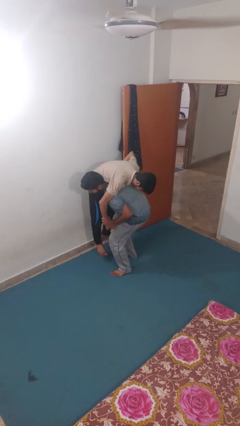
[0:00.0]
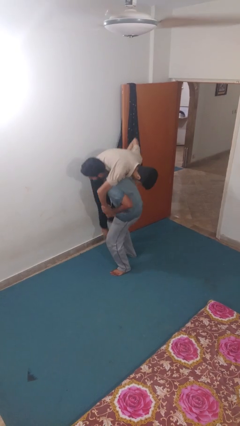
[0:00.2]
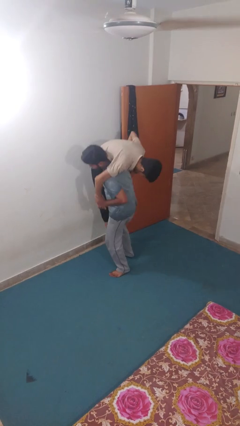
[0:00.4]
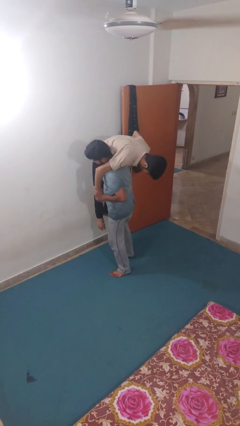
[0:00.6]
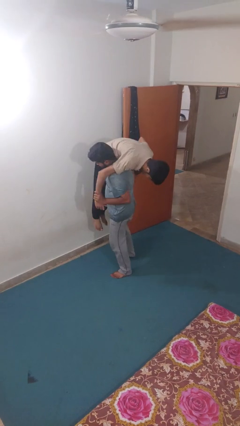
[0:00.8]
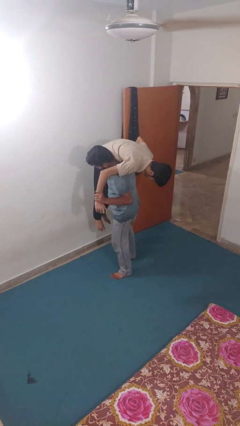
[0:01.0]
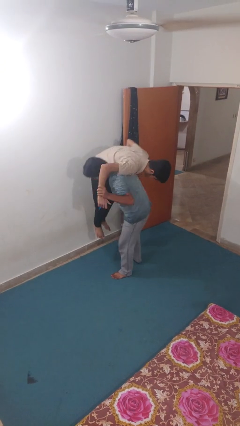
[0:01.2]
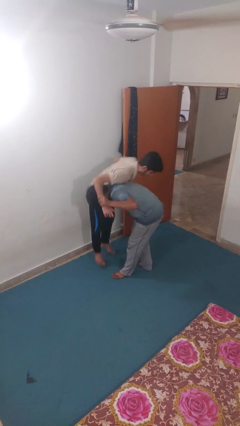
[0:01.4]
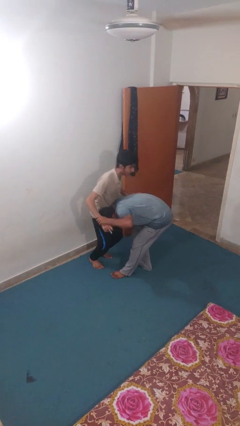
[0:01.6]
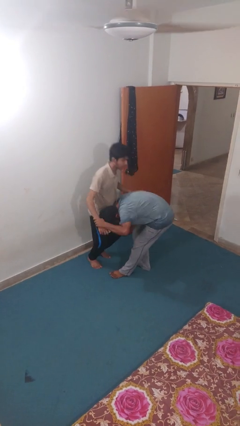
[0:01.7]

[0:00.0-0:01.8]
person puts down person

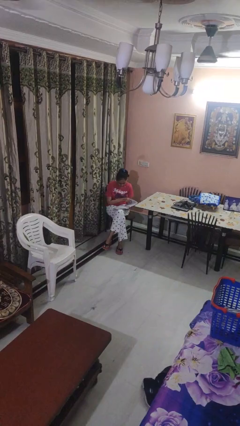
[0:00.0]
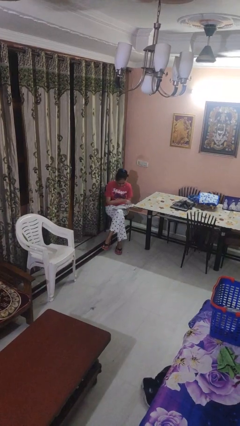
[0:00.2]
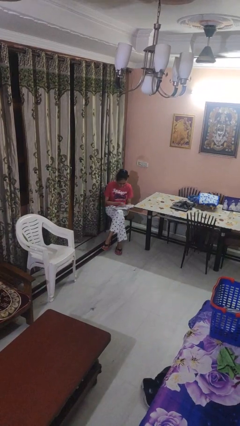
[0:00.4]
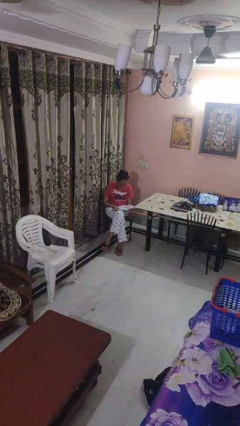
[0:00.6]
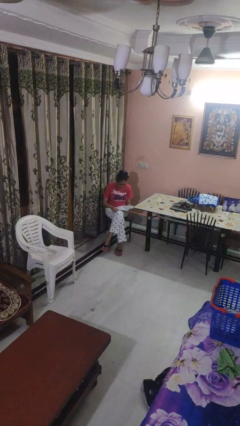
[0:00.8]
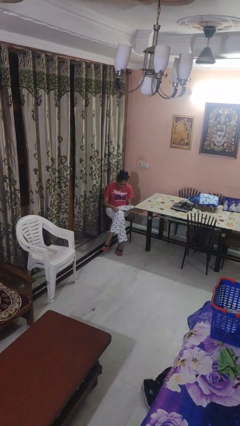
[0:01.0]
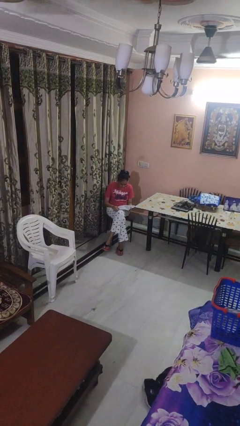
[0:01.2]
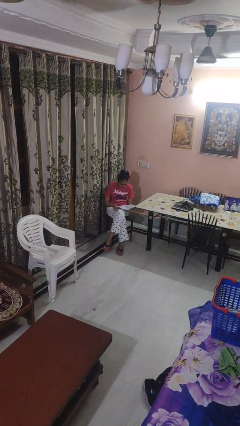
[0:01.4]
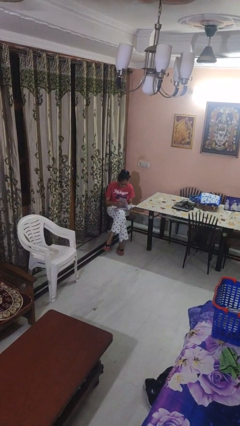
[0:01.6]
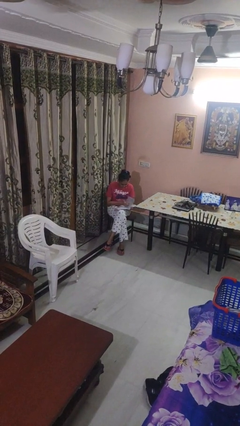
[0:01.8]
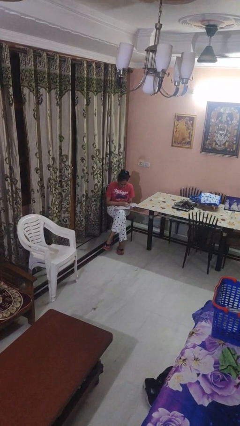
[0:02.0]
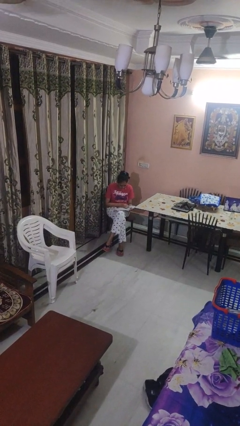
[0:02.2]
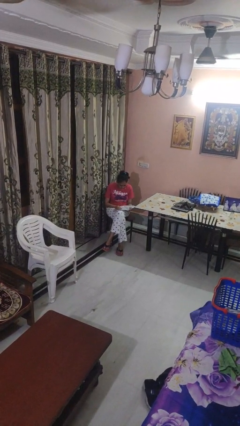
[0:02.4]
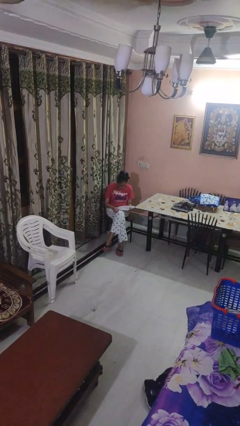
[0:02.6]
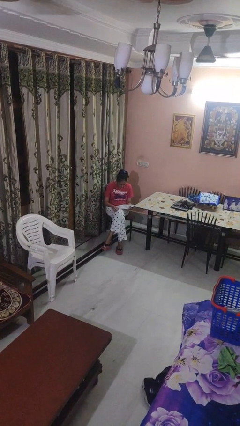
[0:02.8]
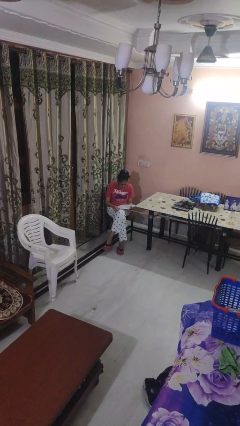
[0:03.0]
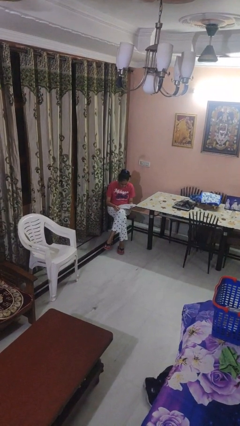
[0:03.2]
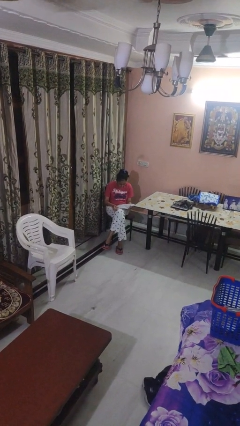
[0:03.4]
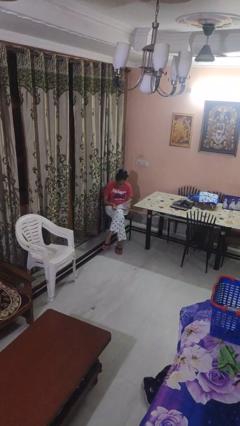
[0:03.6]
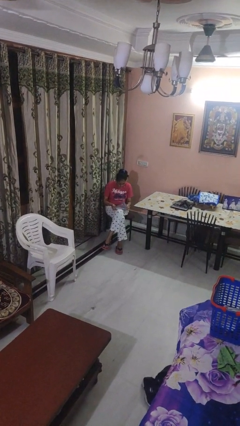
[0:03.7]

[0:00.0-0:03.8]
person reads magazine

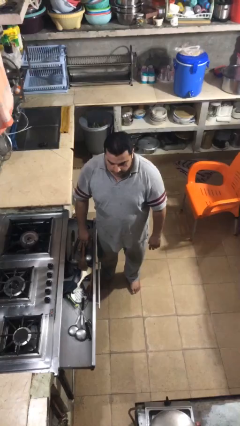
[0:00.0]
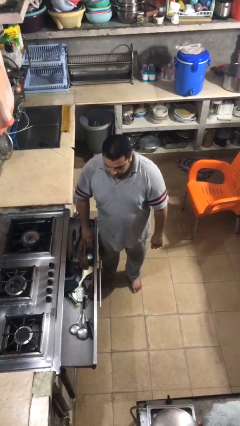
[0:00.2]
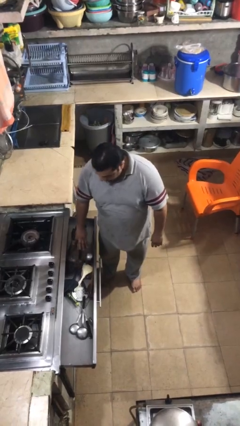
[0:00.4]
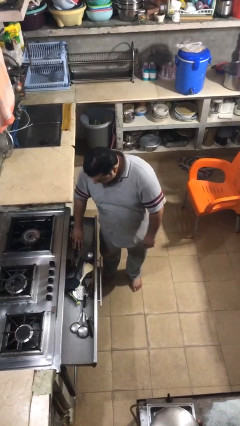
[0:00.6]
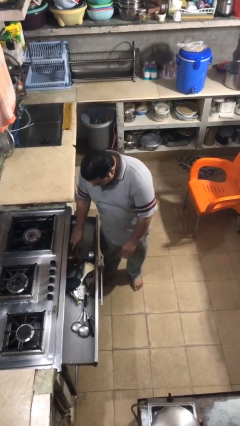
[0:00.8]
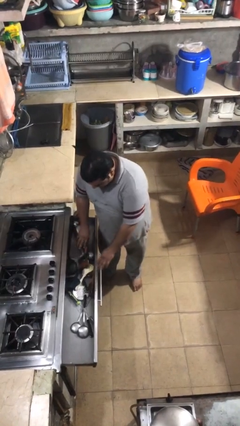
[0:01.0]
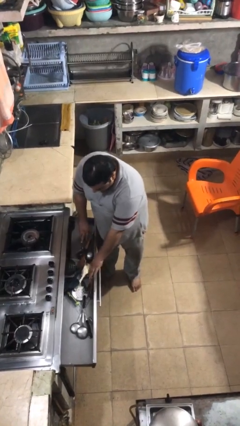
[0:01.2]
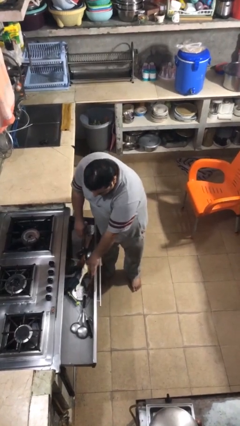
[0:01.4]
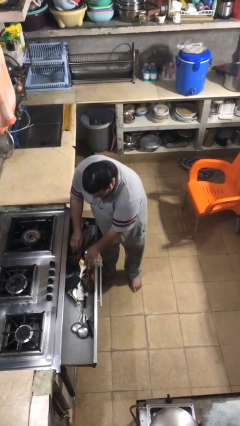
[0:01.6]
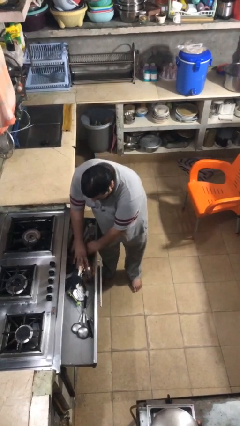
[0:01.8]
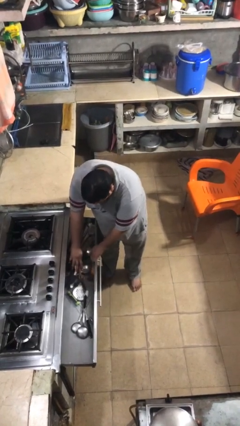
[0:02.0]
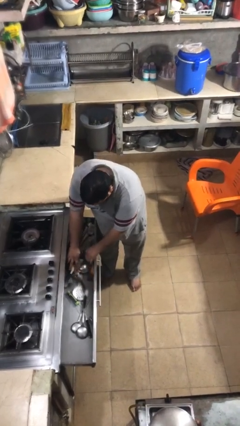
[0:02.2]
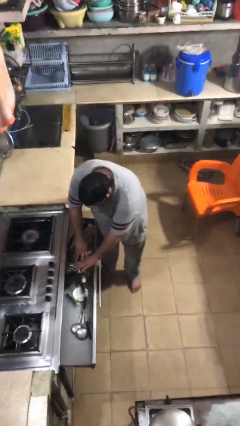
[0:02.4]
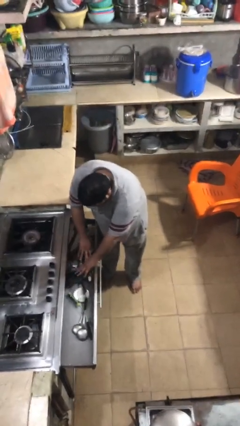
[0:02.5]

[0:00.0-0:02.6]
person searches in kitchen drawer

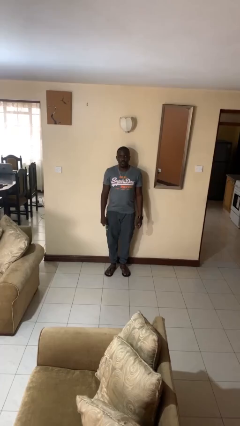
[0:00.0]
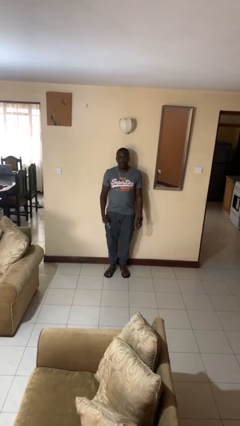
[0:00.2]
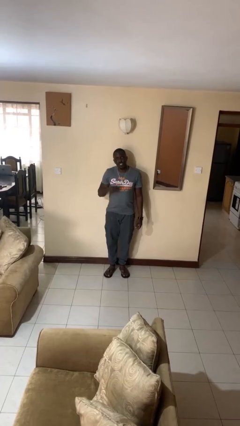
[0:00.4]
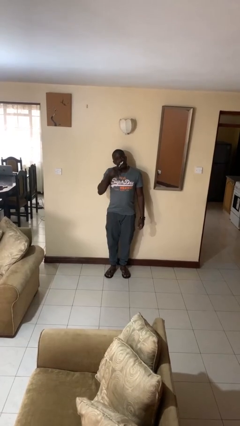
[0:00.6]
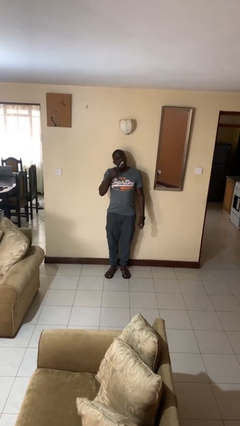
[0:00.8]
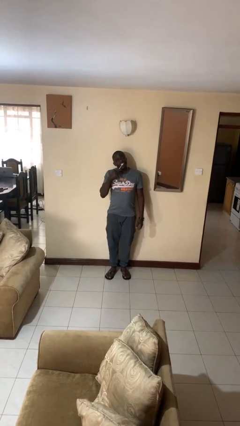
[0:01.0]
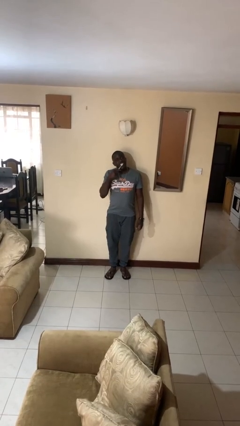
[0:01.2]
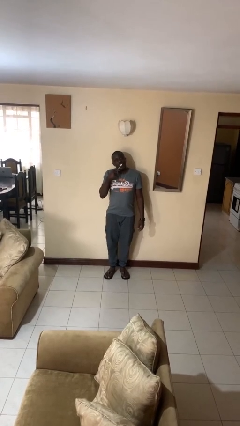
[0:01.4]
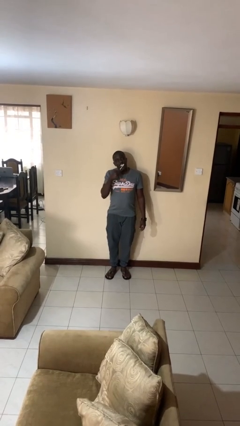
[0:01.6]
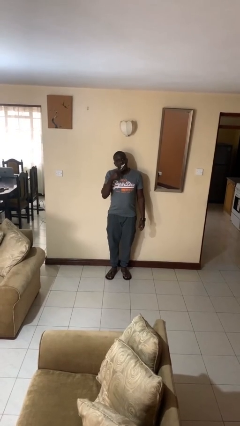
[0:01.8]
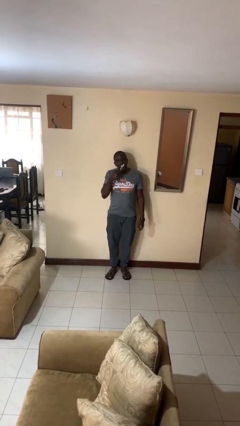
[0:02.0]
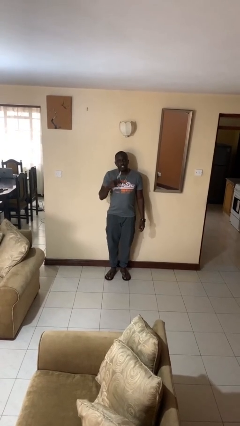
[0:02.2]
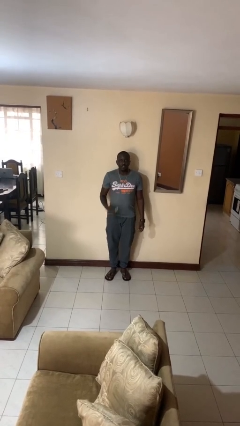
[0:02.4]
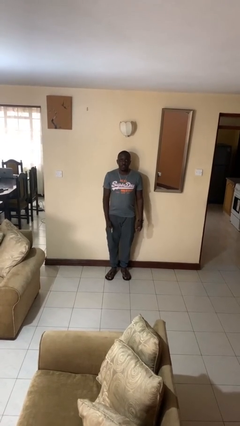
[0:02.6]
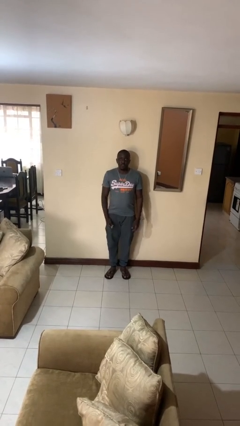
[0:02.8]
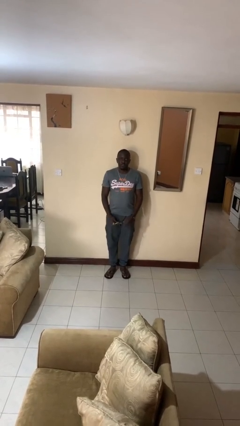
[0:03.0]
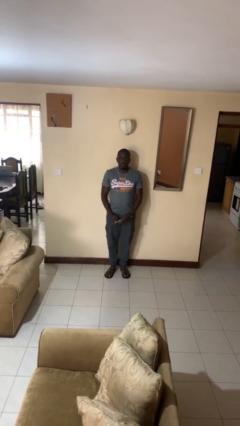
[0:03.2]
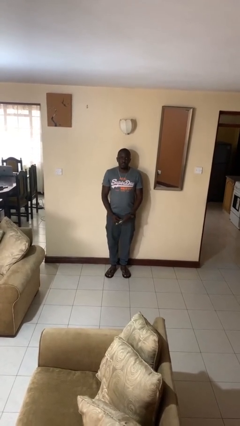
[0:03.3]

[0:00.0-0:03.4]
person brushes teeth

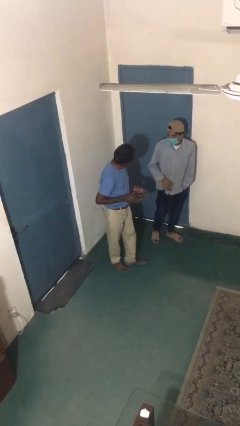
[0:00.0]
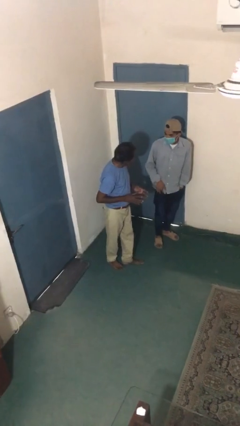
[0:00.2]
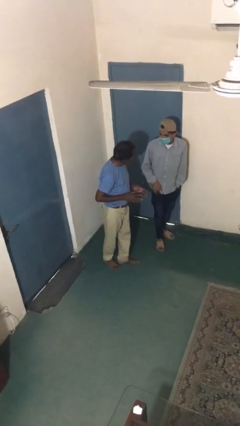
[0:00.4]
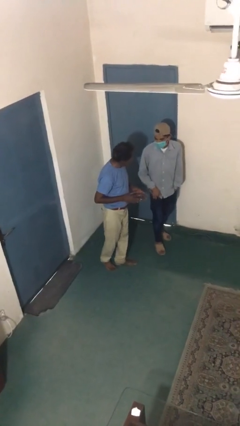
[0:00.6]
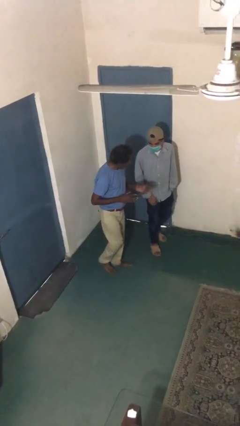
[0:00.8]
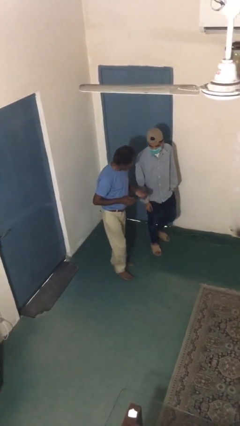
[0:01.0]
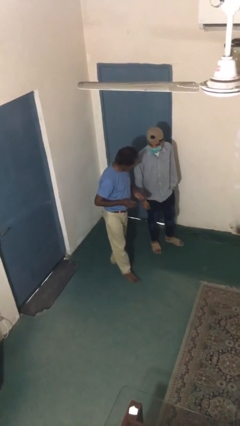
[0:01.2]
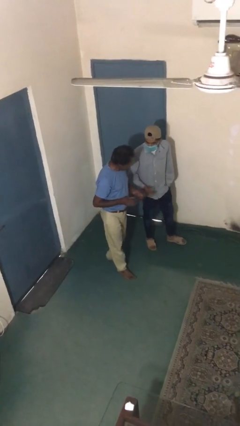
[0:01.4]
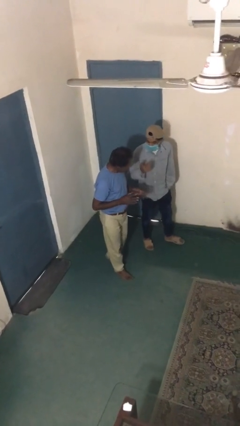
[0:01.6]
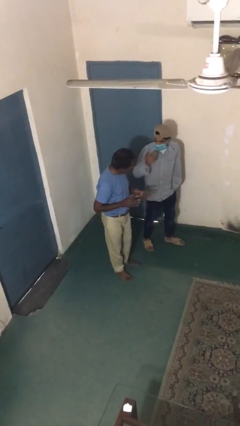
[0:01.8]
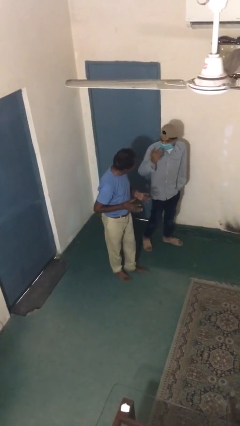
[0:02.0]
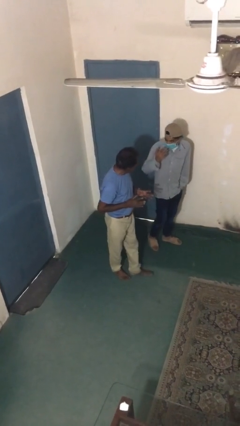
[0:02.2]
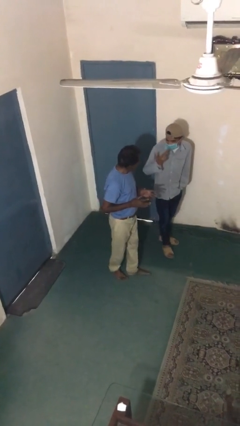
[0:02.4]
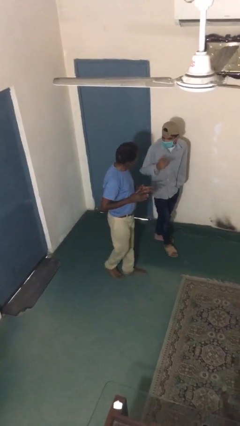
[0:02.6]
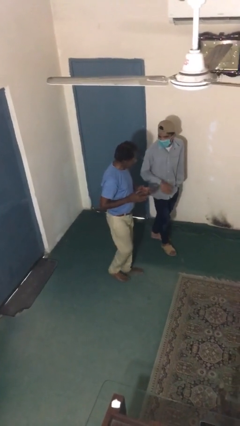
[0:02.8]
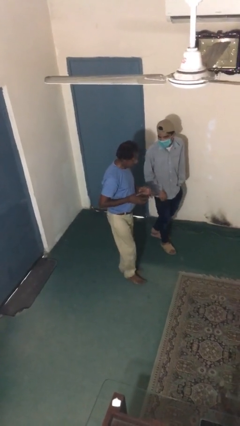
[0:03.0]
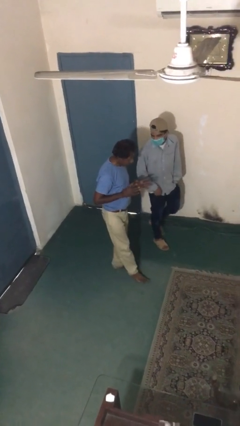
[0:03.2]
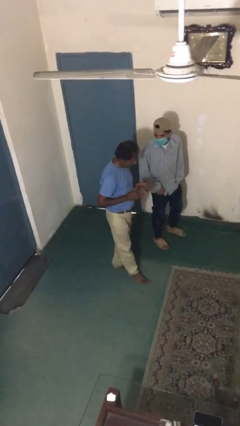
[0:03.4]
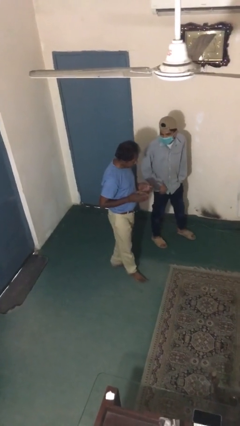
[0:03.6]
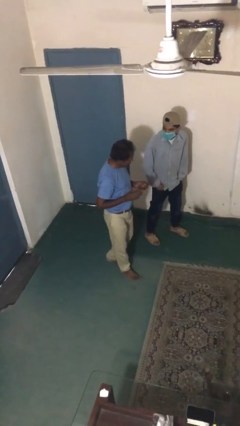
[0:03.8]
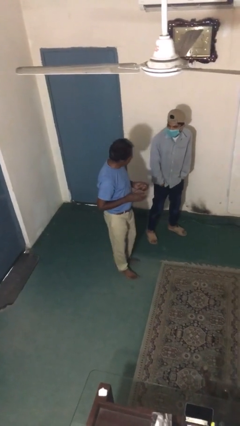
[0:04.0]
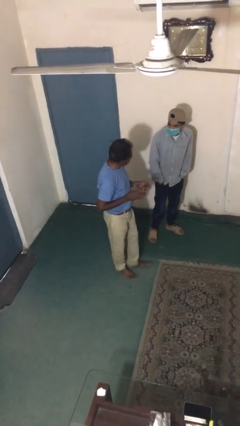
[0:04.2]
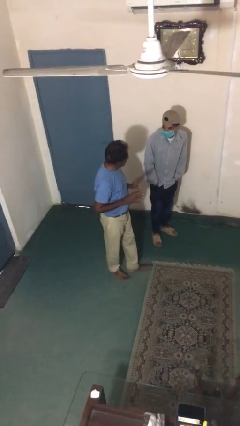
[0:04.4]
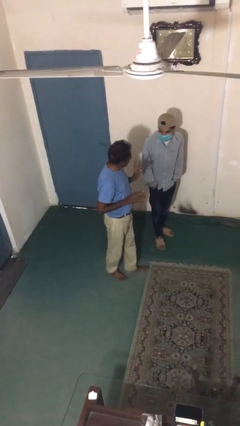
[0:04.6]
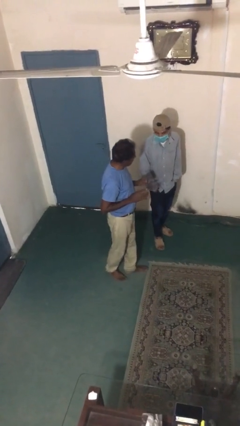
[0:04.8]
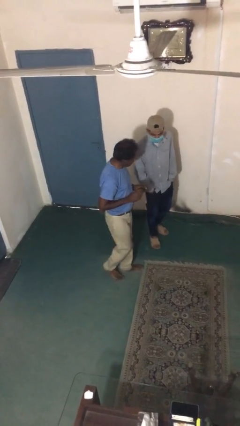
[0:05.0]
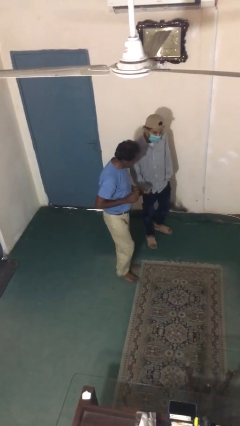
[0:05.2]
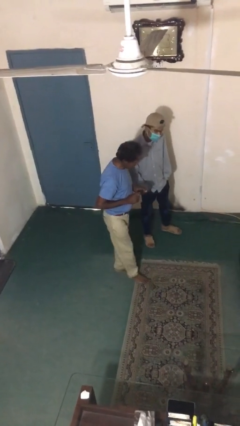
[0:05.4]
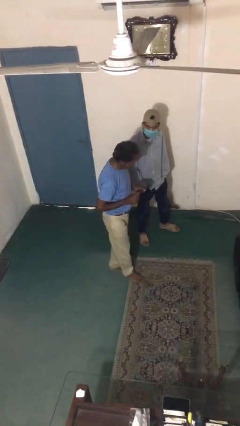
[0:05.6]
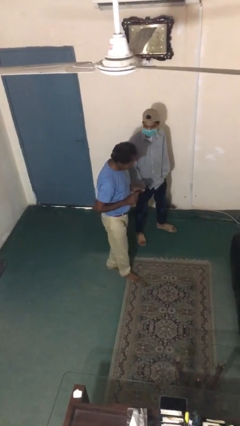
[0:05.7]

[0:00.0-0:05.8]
person talks to person
